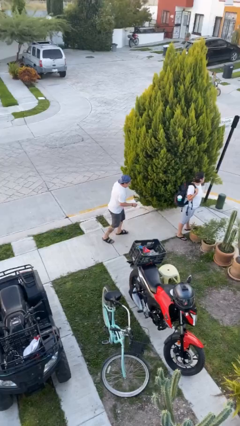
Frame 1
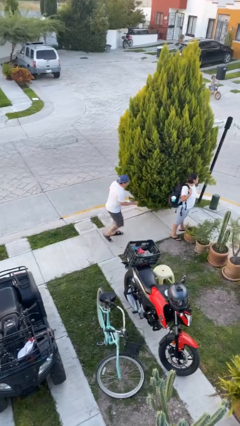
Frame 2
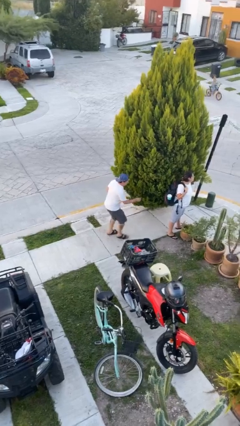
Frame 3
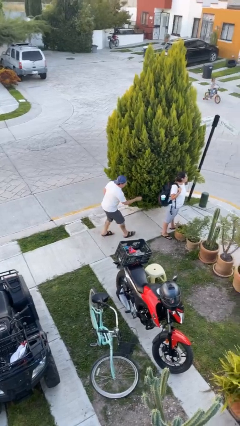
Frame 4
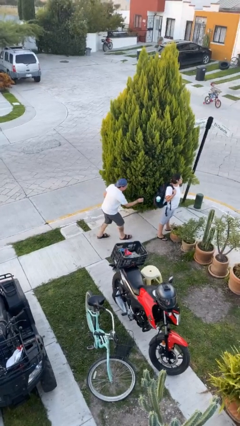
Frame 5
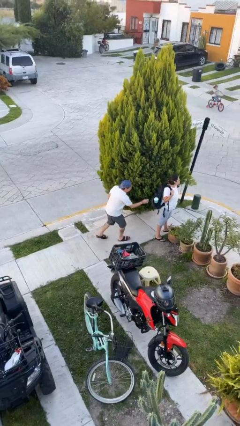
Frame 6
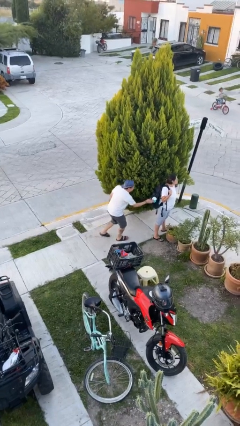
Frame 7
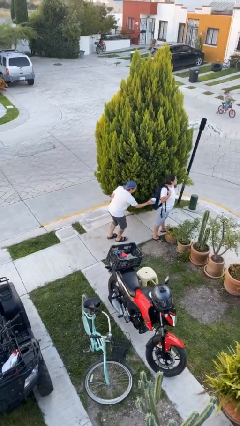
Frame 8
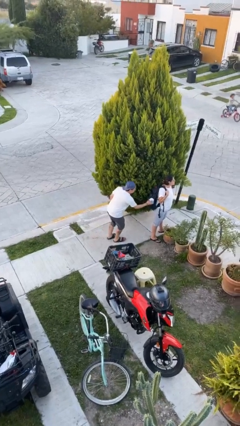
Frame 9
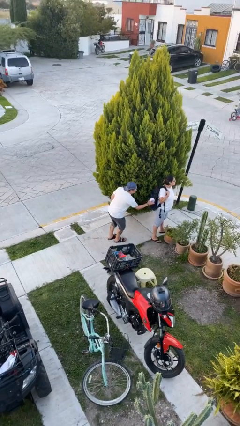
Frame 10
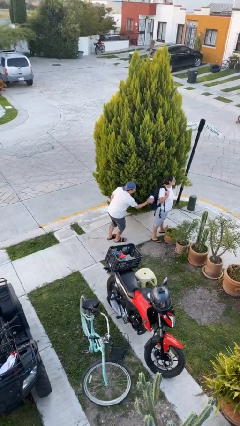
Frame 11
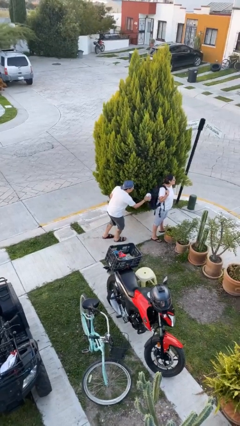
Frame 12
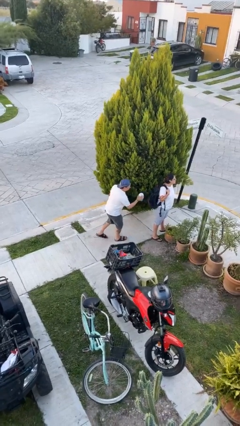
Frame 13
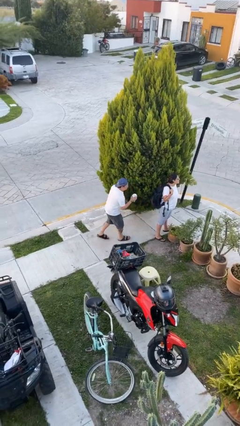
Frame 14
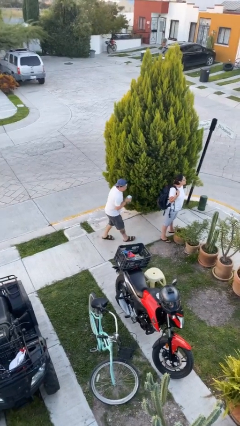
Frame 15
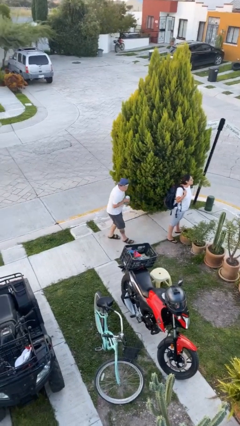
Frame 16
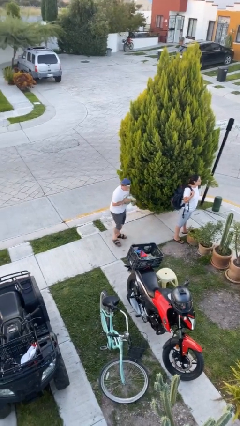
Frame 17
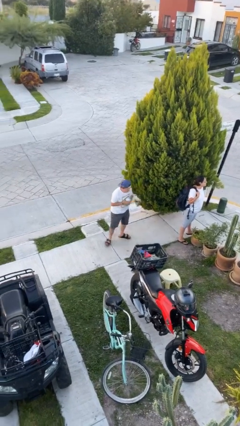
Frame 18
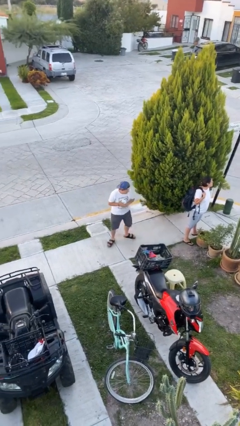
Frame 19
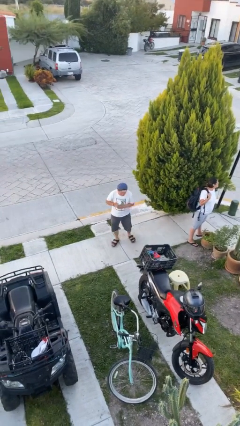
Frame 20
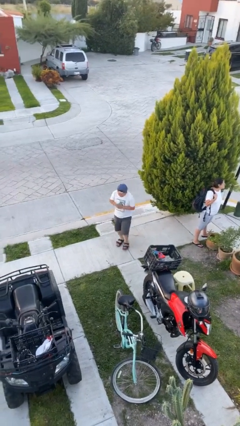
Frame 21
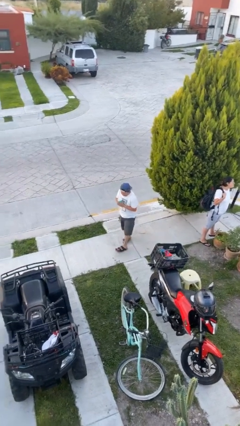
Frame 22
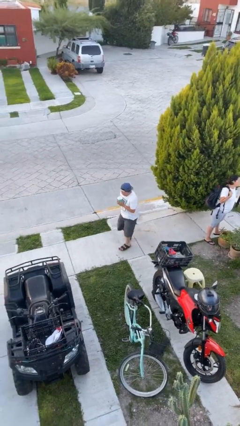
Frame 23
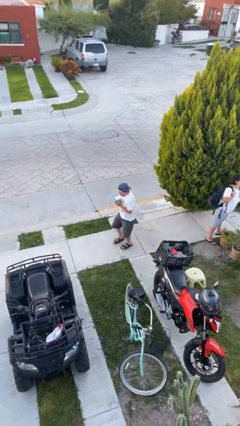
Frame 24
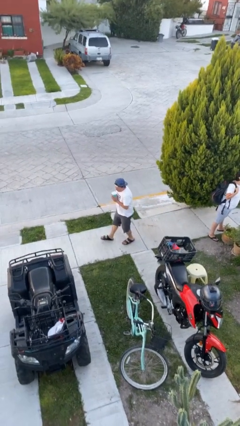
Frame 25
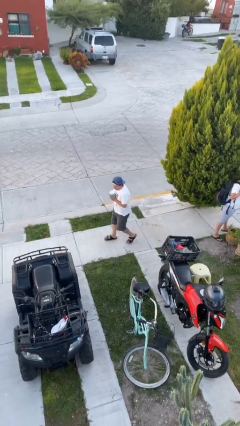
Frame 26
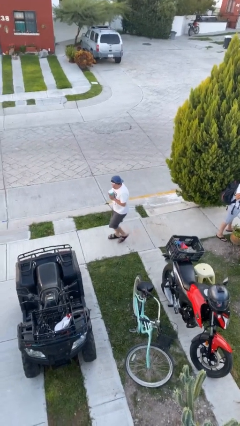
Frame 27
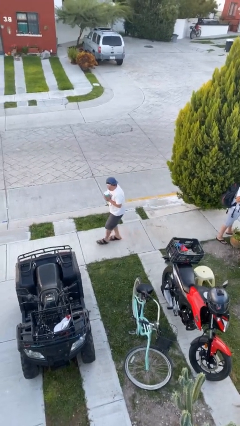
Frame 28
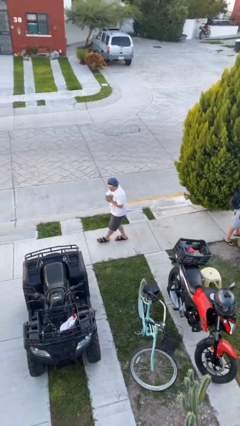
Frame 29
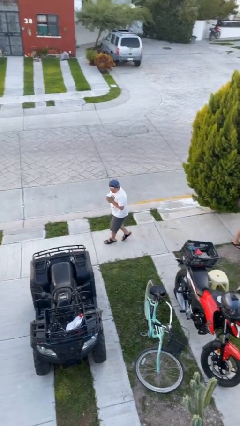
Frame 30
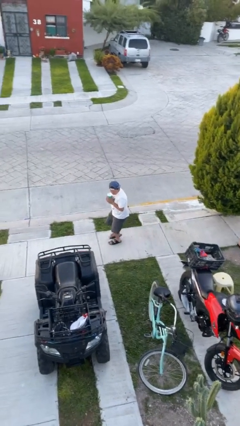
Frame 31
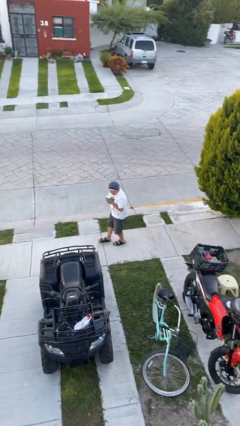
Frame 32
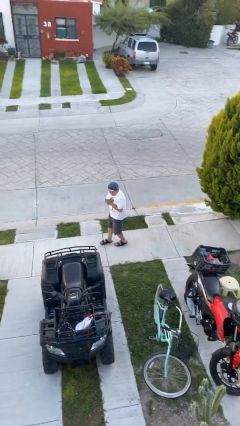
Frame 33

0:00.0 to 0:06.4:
person steals object from person

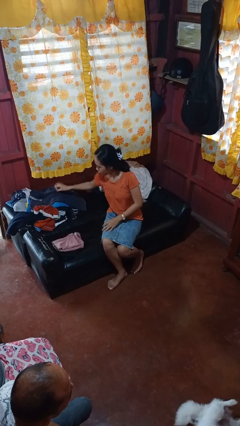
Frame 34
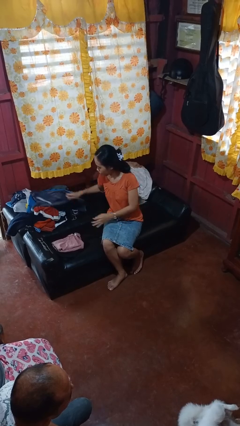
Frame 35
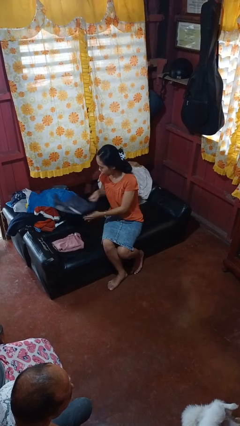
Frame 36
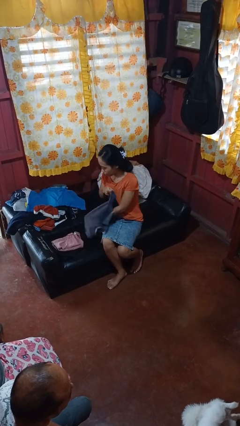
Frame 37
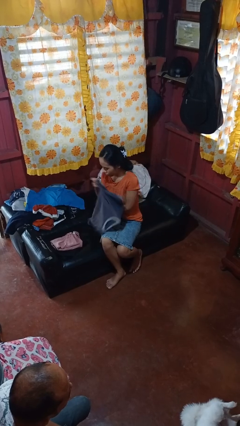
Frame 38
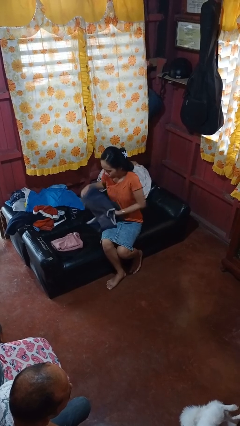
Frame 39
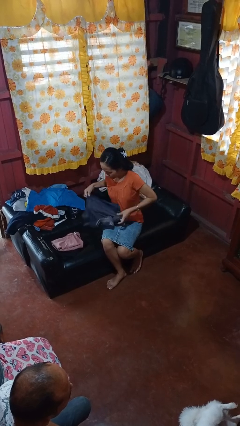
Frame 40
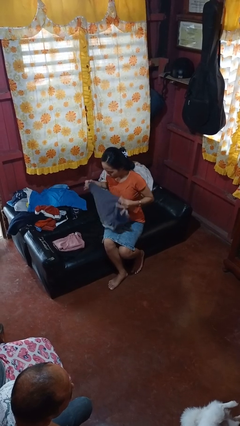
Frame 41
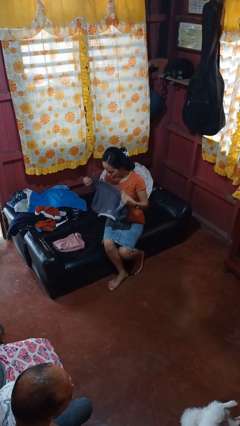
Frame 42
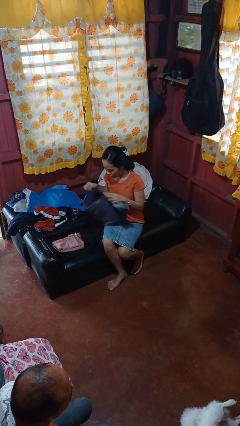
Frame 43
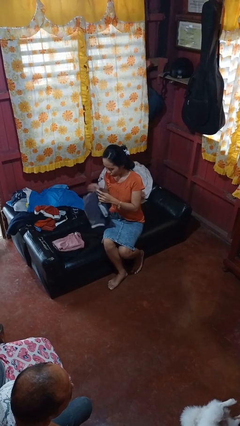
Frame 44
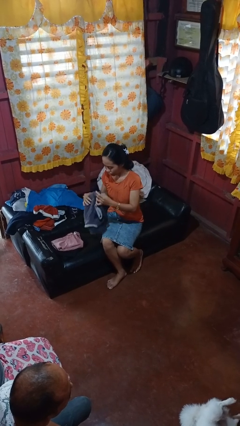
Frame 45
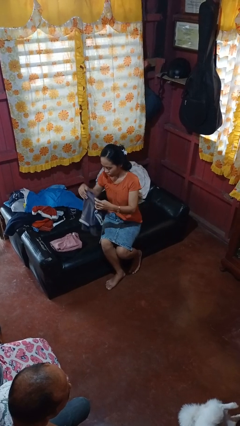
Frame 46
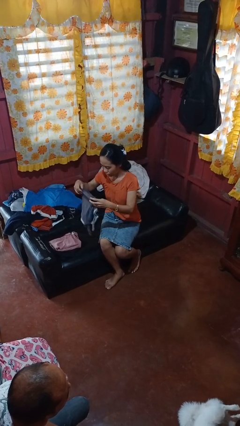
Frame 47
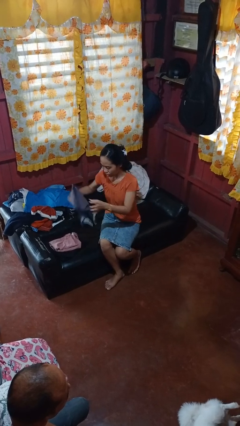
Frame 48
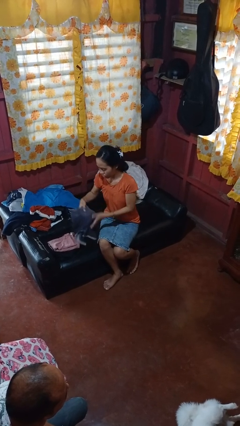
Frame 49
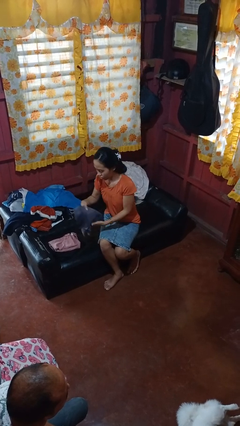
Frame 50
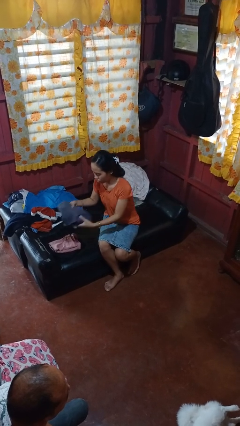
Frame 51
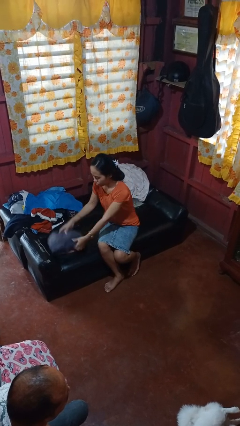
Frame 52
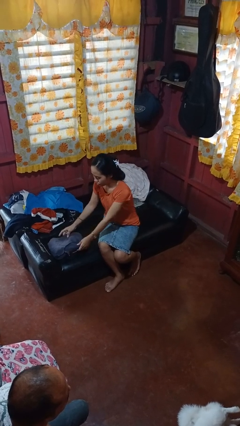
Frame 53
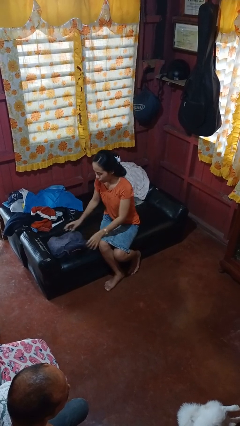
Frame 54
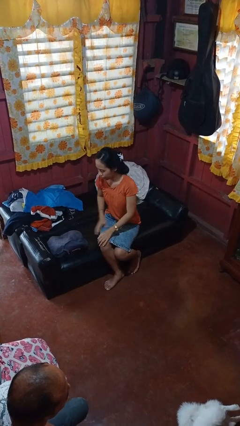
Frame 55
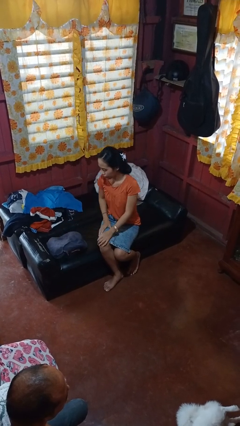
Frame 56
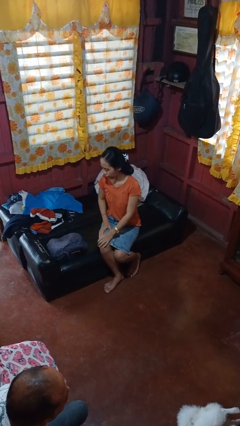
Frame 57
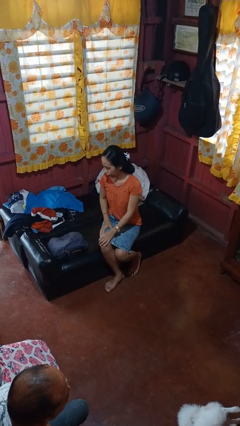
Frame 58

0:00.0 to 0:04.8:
person folds shirt

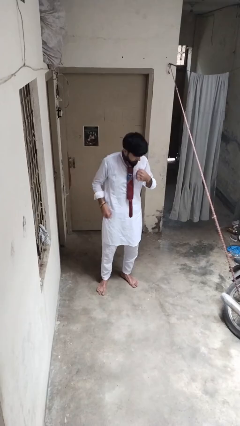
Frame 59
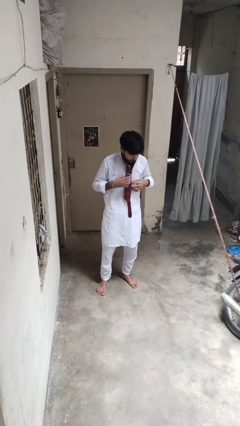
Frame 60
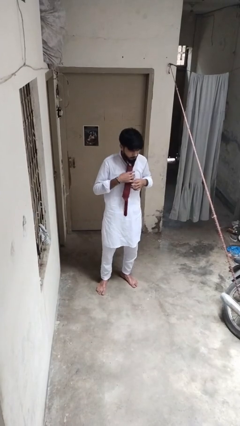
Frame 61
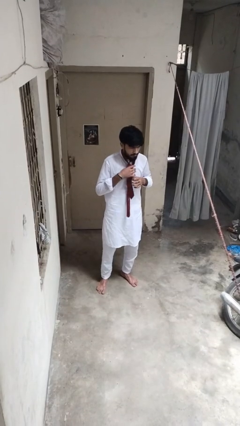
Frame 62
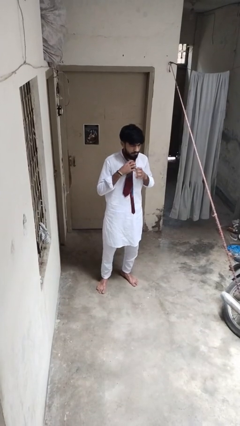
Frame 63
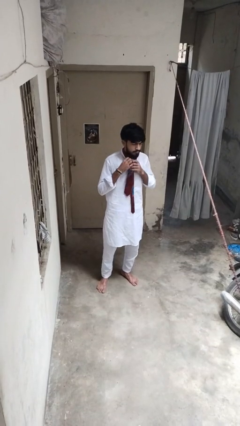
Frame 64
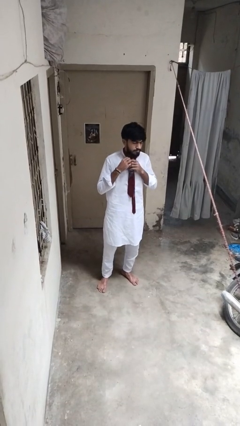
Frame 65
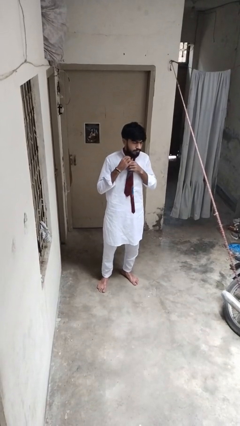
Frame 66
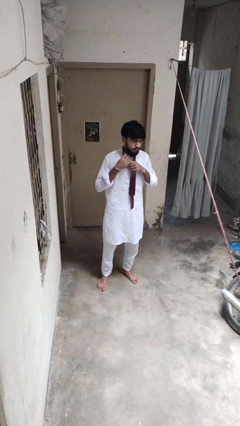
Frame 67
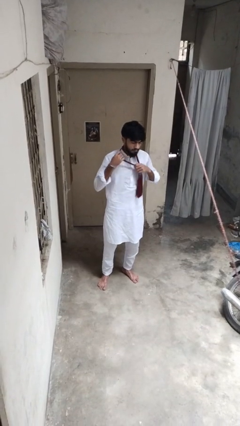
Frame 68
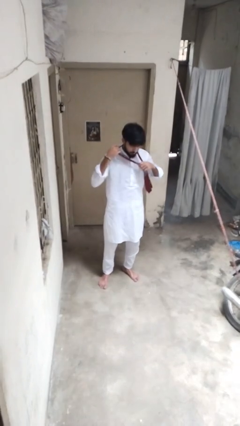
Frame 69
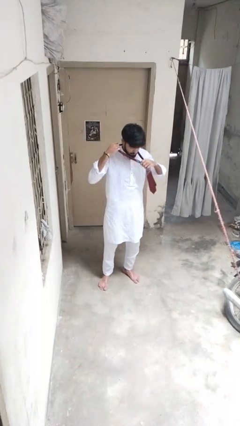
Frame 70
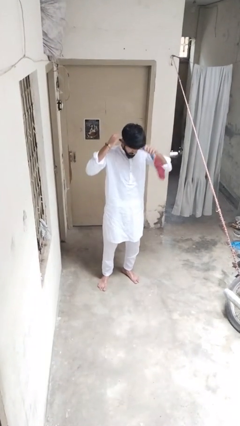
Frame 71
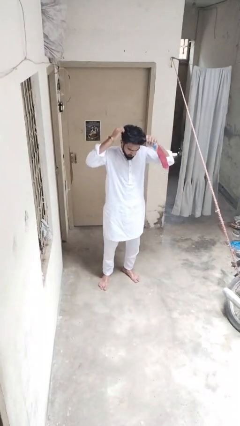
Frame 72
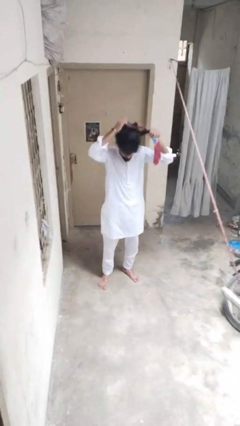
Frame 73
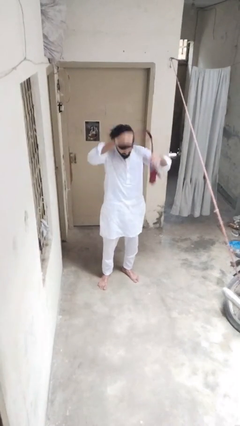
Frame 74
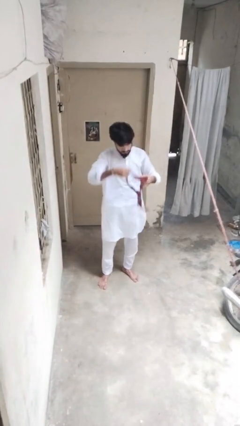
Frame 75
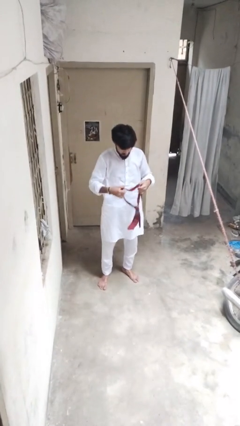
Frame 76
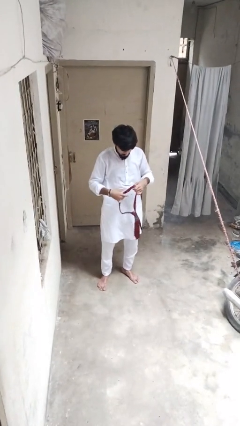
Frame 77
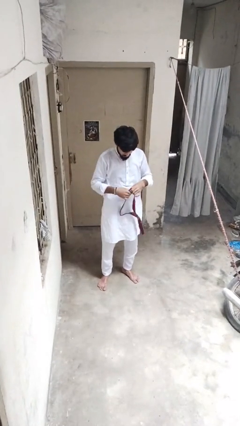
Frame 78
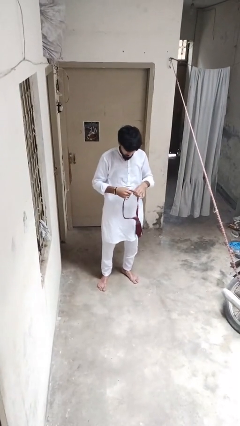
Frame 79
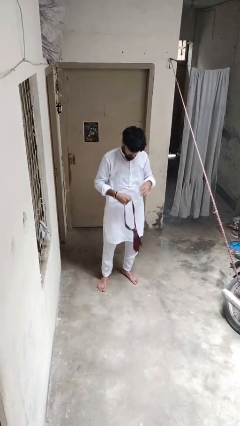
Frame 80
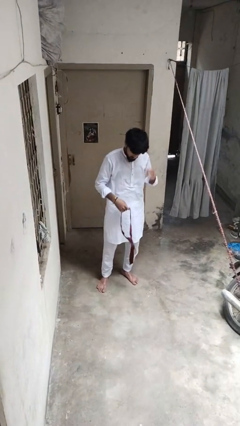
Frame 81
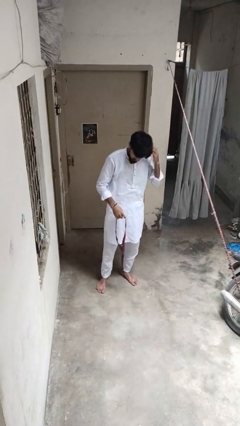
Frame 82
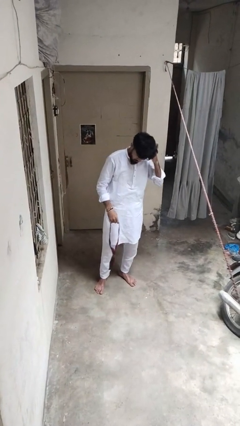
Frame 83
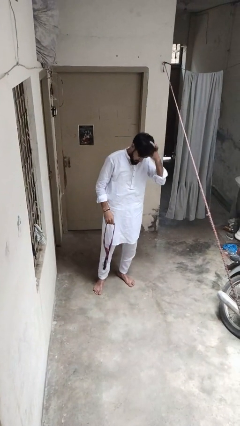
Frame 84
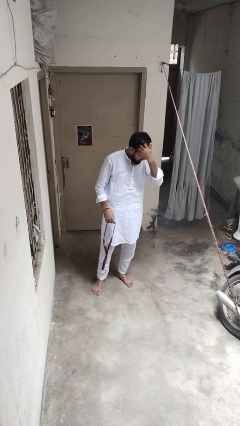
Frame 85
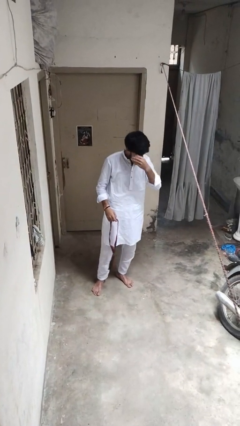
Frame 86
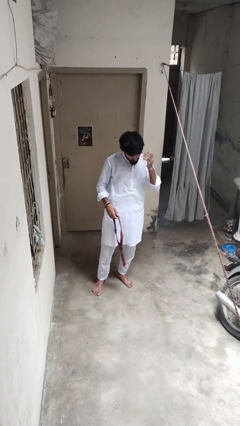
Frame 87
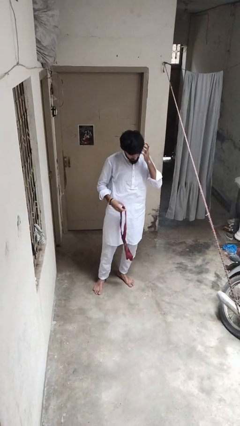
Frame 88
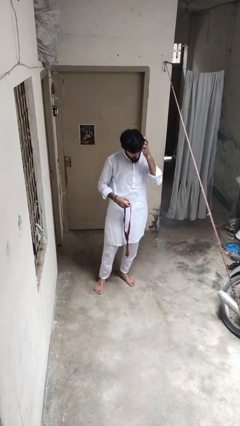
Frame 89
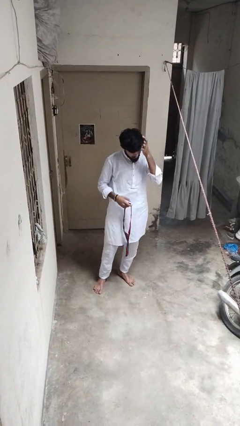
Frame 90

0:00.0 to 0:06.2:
person takes off necktie

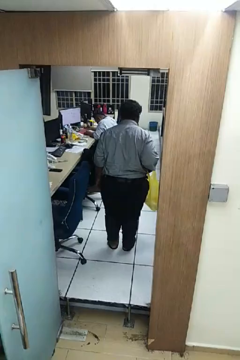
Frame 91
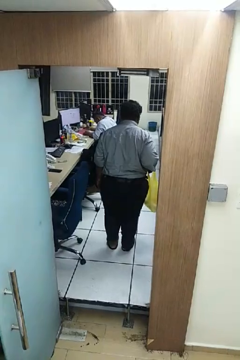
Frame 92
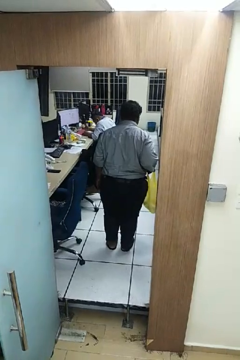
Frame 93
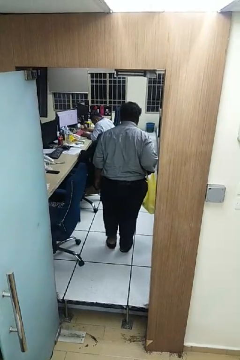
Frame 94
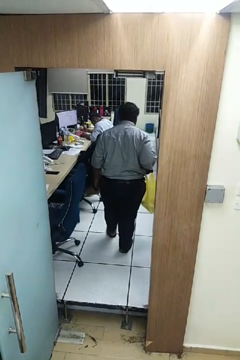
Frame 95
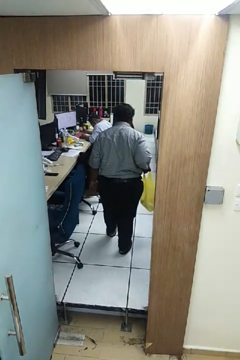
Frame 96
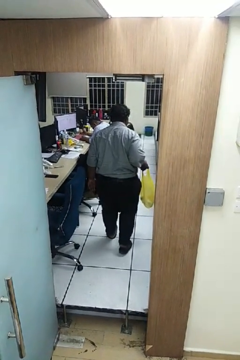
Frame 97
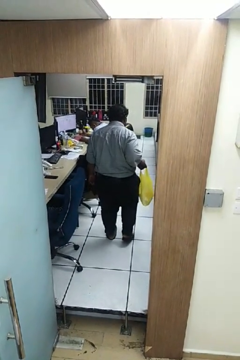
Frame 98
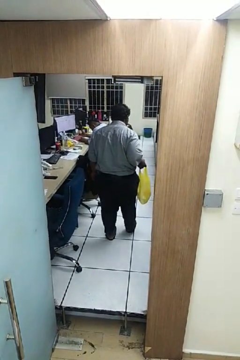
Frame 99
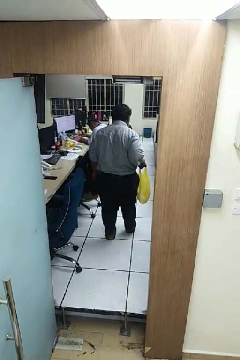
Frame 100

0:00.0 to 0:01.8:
person carries groceries
